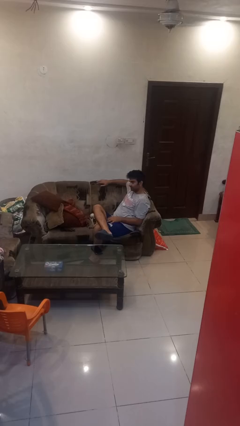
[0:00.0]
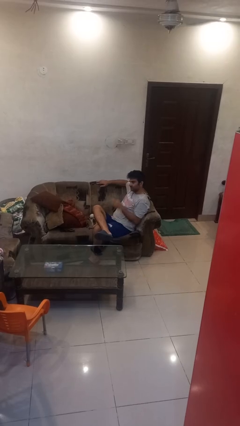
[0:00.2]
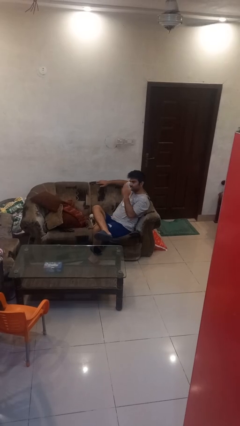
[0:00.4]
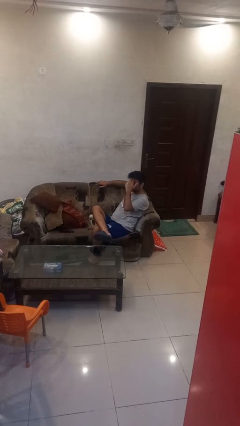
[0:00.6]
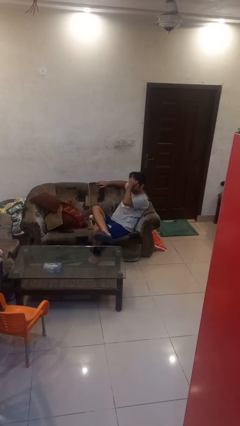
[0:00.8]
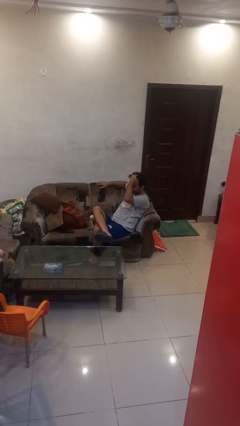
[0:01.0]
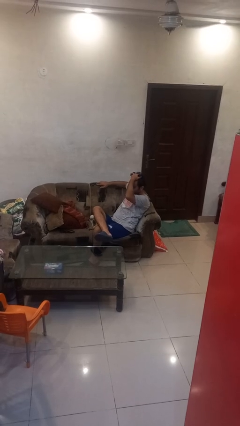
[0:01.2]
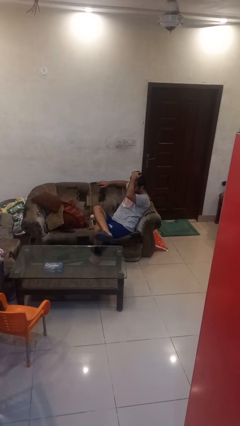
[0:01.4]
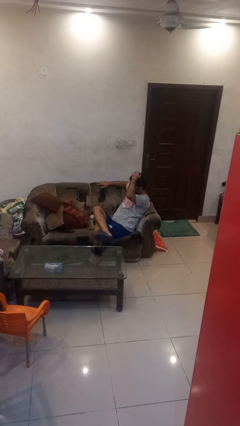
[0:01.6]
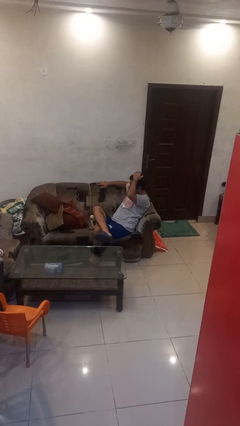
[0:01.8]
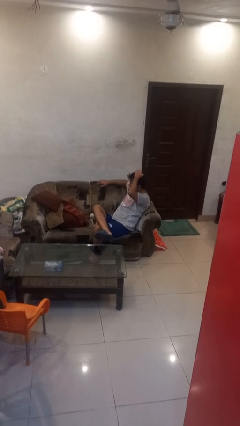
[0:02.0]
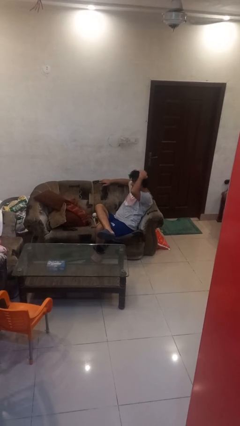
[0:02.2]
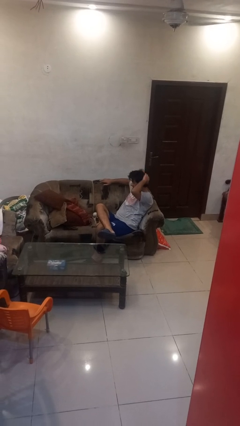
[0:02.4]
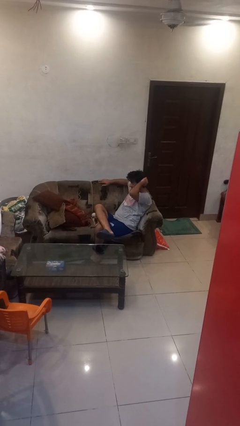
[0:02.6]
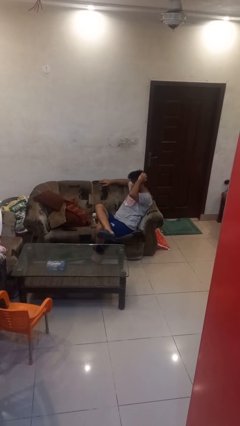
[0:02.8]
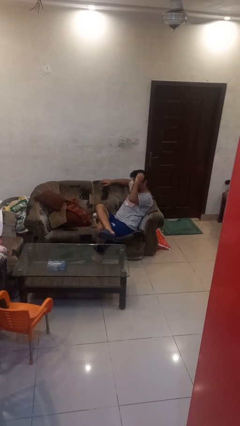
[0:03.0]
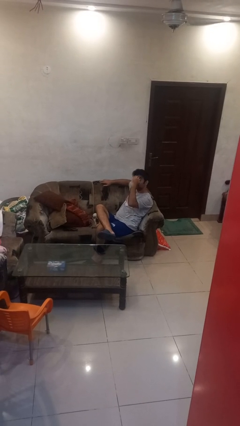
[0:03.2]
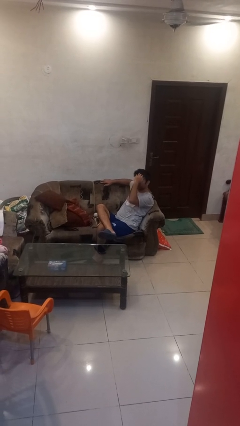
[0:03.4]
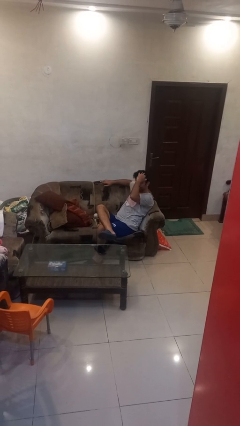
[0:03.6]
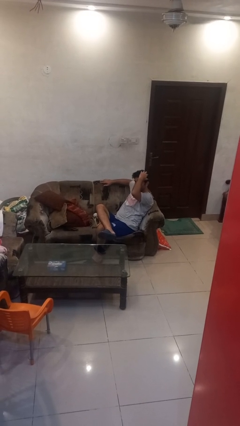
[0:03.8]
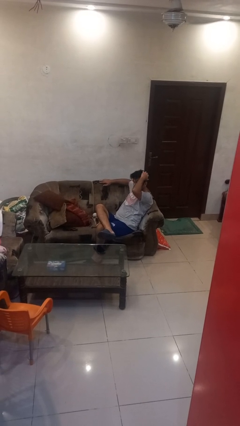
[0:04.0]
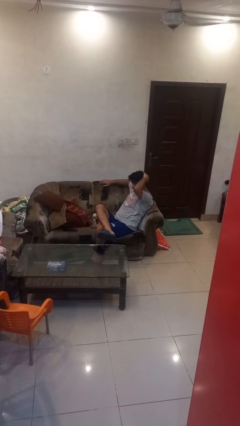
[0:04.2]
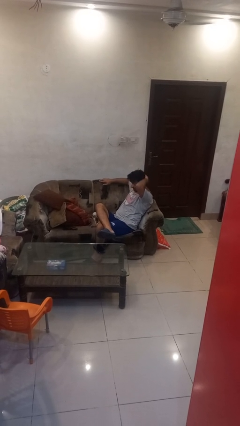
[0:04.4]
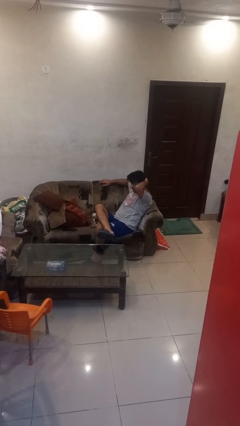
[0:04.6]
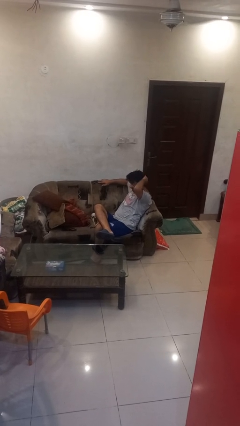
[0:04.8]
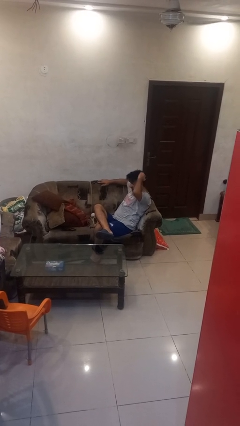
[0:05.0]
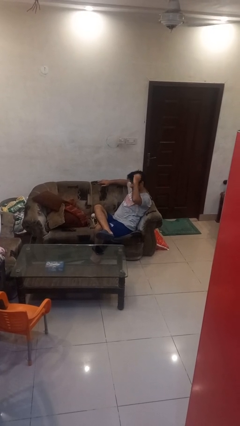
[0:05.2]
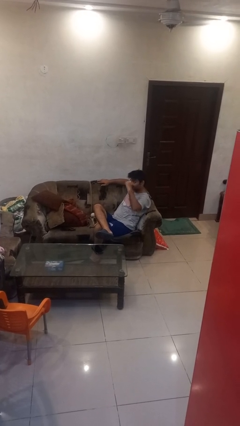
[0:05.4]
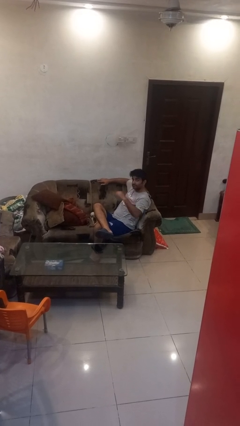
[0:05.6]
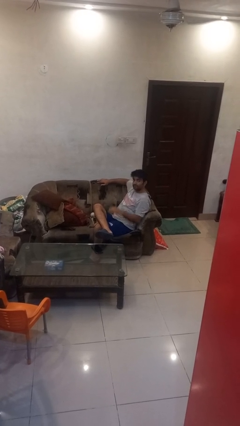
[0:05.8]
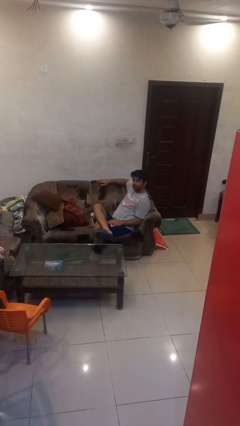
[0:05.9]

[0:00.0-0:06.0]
person strokes hair

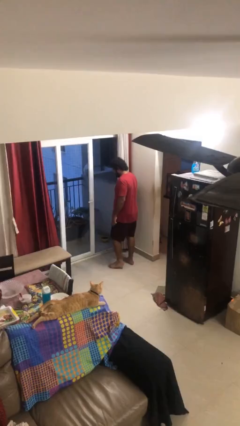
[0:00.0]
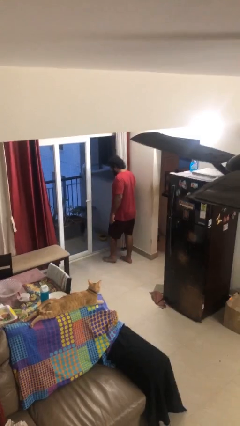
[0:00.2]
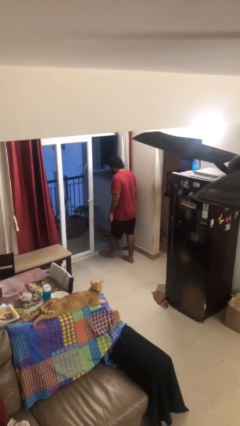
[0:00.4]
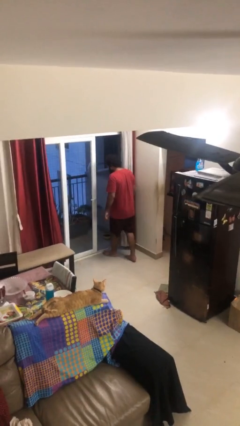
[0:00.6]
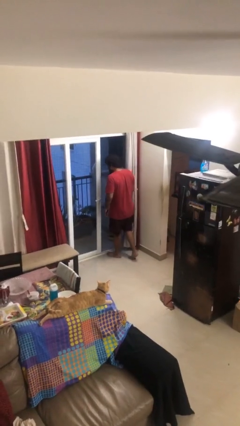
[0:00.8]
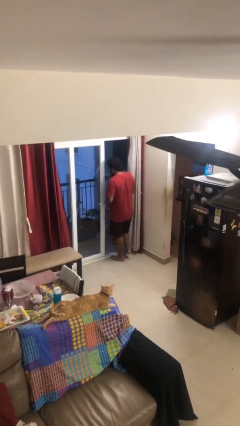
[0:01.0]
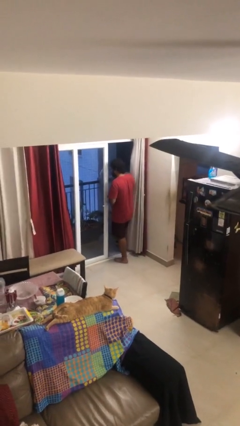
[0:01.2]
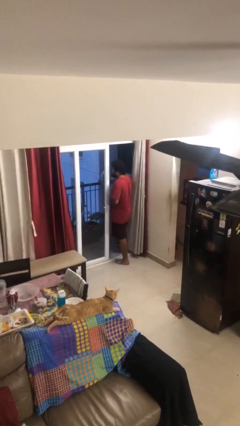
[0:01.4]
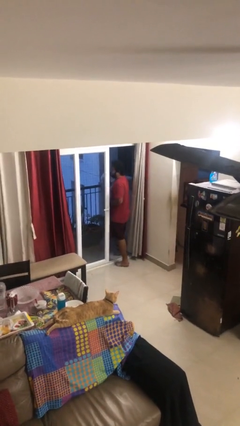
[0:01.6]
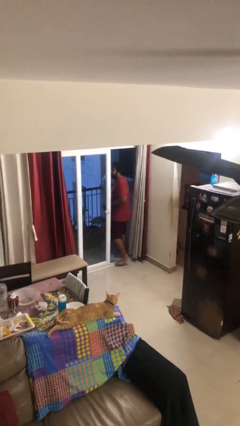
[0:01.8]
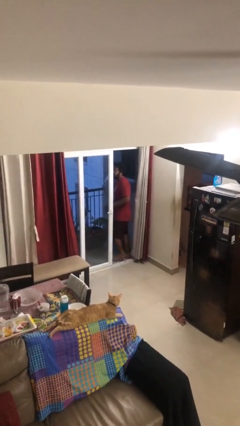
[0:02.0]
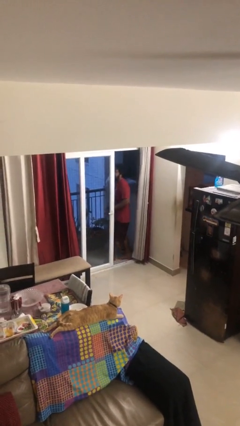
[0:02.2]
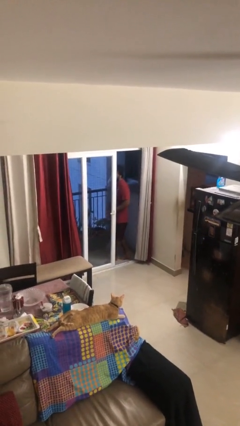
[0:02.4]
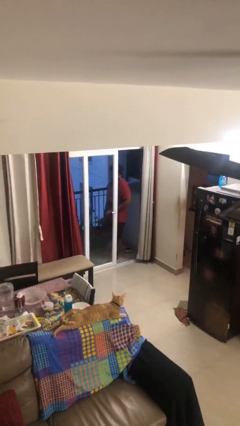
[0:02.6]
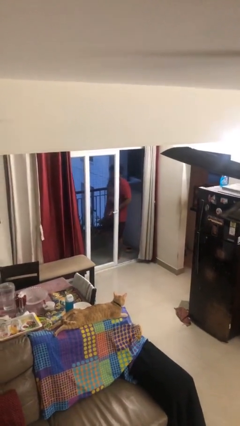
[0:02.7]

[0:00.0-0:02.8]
person exits scene through structure

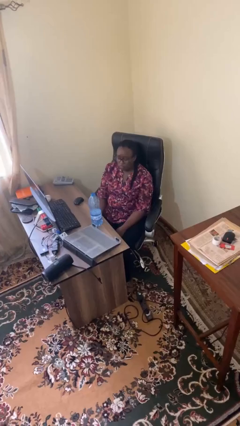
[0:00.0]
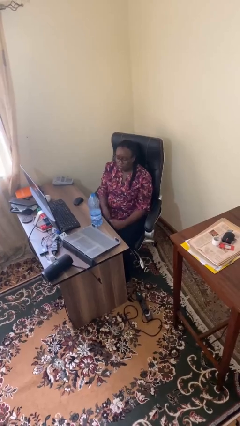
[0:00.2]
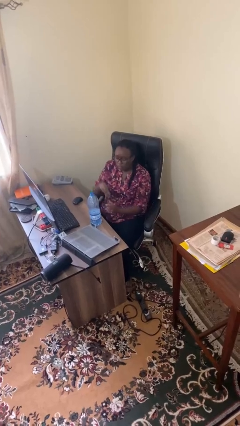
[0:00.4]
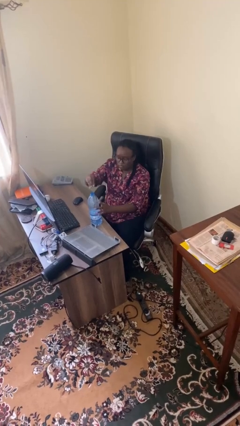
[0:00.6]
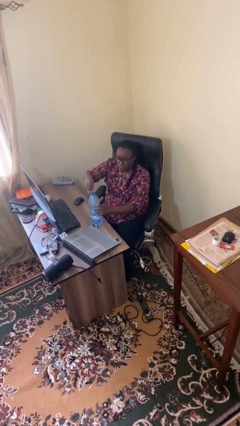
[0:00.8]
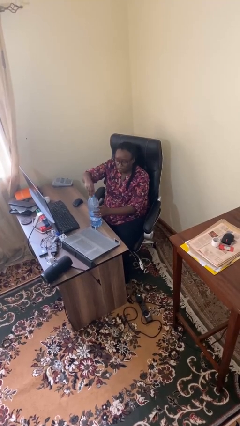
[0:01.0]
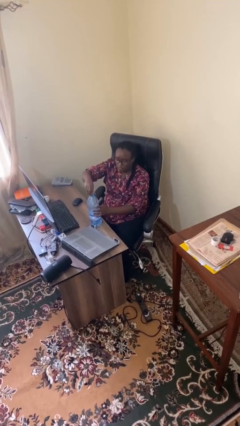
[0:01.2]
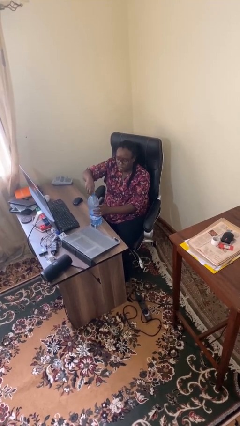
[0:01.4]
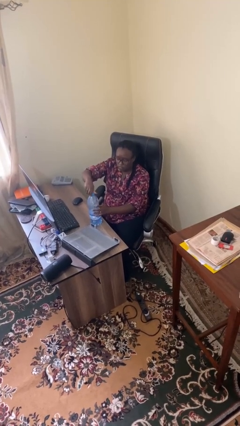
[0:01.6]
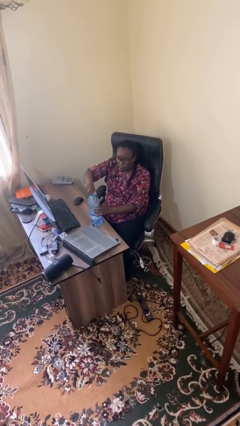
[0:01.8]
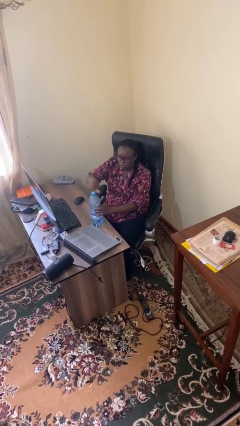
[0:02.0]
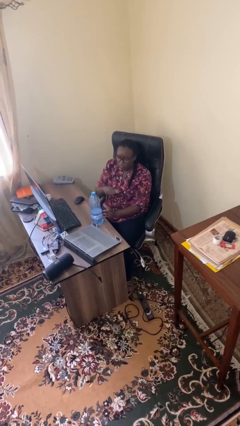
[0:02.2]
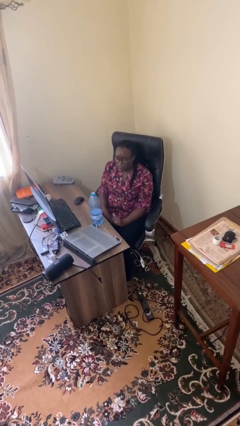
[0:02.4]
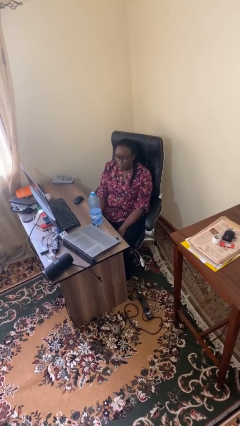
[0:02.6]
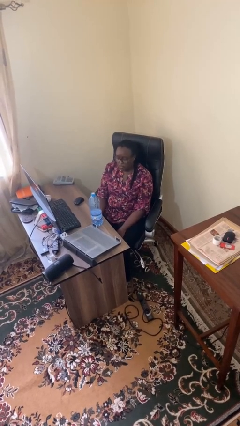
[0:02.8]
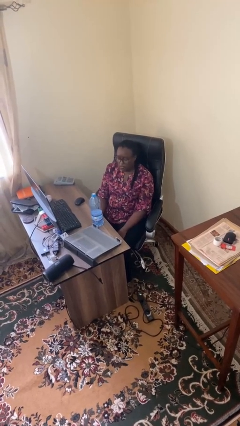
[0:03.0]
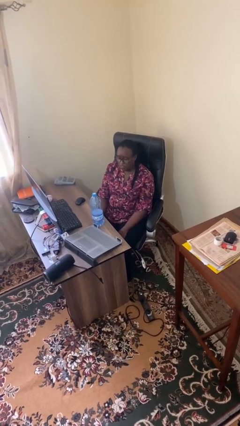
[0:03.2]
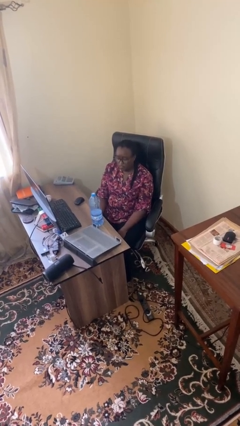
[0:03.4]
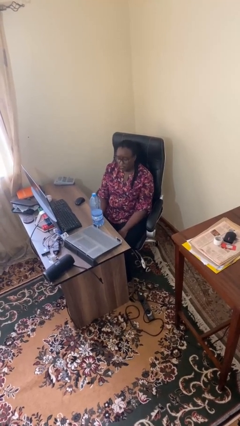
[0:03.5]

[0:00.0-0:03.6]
person screws lid to bottle

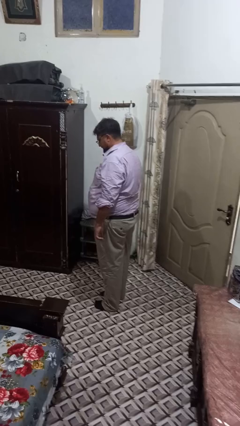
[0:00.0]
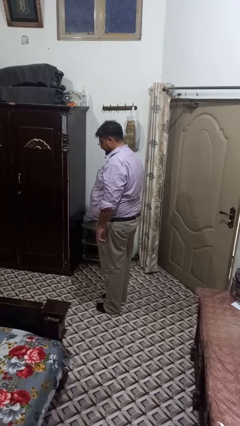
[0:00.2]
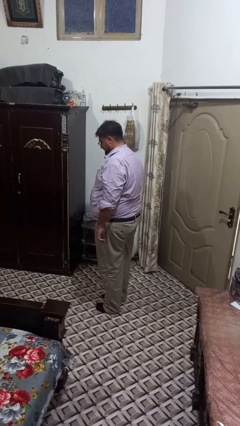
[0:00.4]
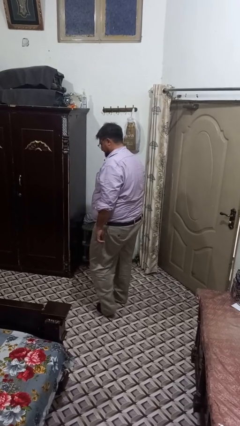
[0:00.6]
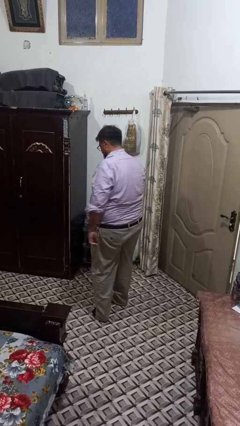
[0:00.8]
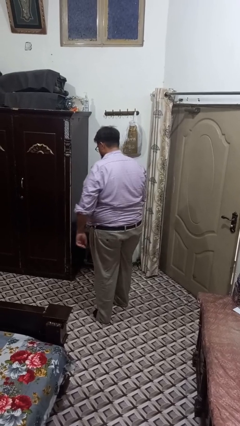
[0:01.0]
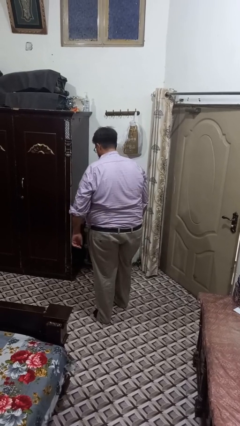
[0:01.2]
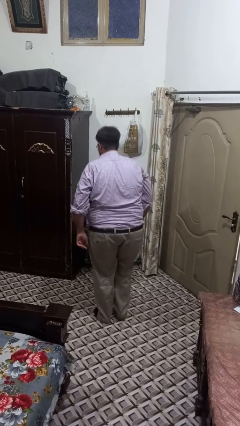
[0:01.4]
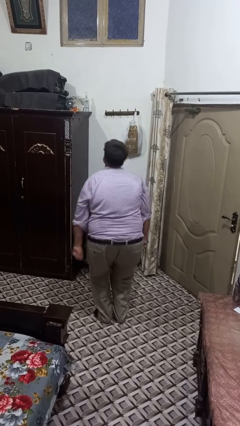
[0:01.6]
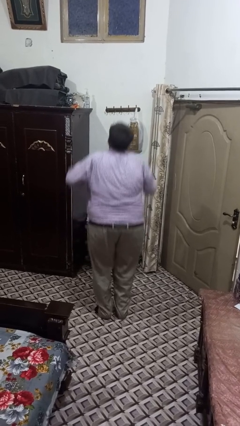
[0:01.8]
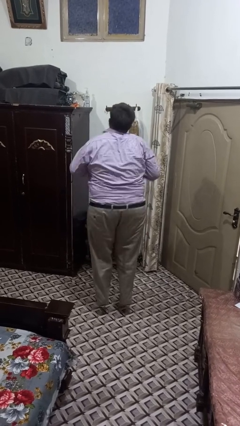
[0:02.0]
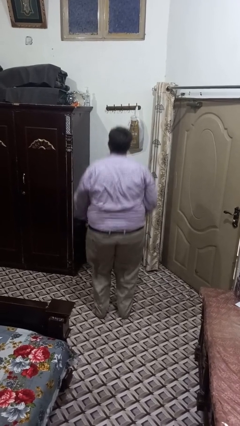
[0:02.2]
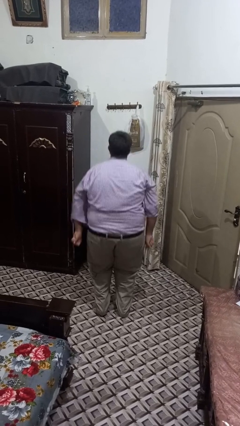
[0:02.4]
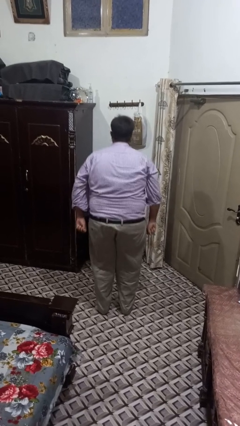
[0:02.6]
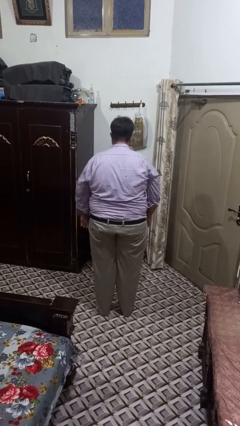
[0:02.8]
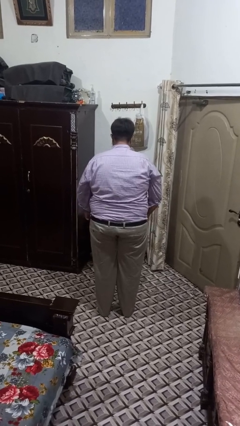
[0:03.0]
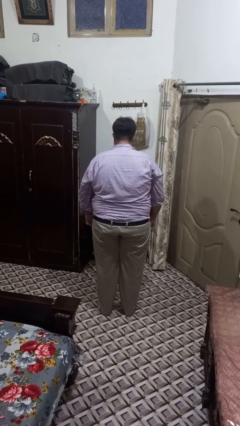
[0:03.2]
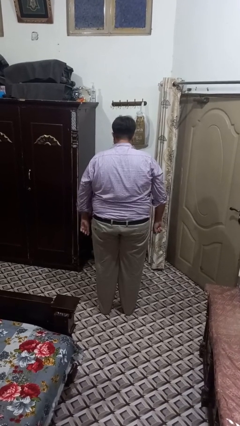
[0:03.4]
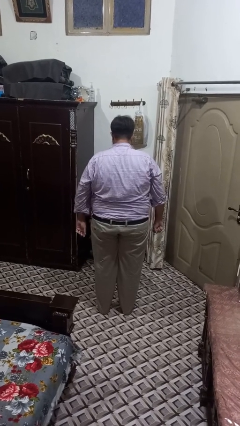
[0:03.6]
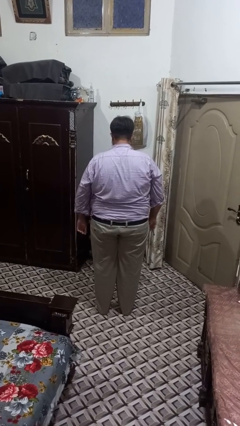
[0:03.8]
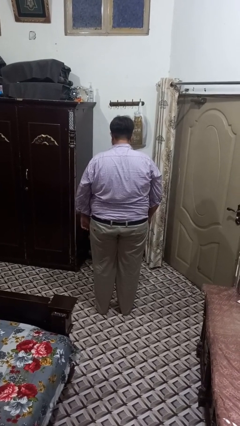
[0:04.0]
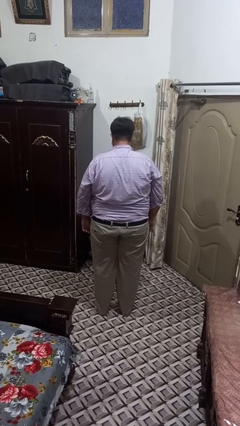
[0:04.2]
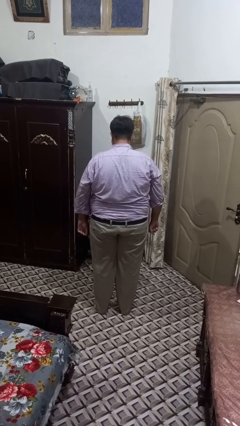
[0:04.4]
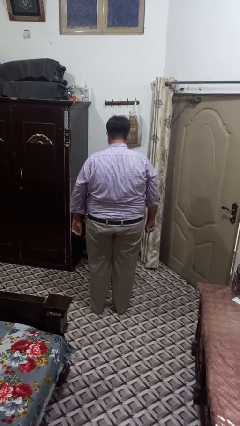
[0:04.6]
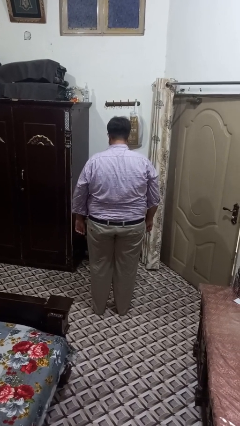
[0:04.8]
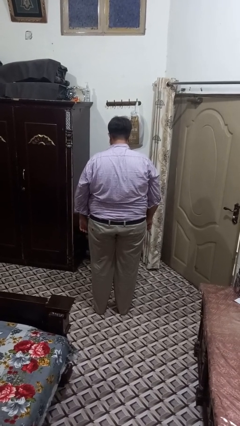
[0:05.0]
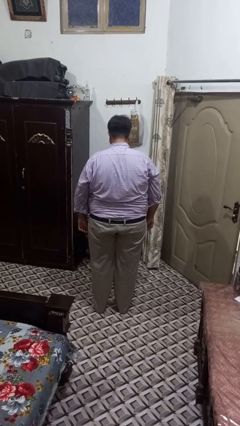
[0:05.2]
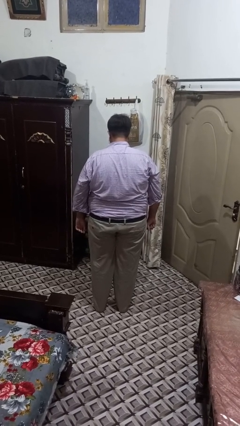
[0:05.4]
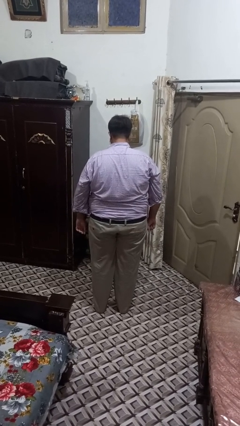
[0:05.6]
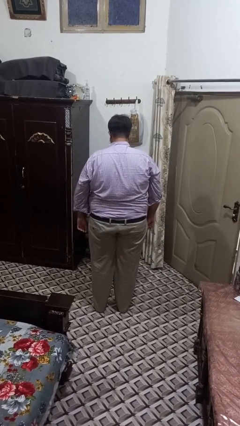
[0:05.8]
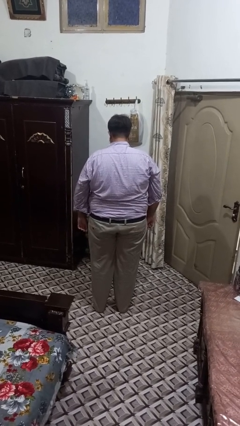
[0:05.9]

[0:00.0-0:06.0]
person jumps
